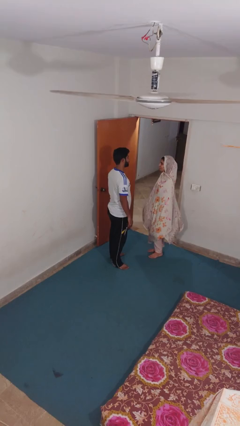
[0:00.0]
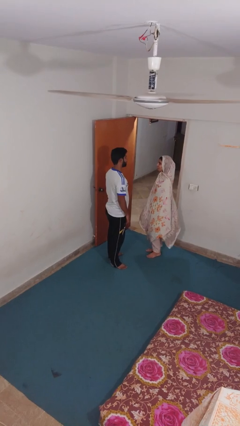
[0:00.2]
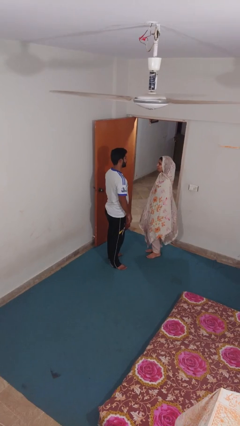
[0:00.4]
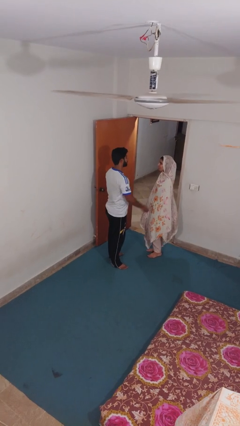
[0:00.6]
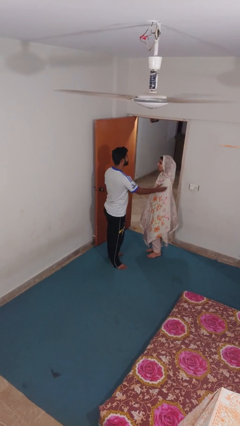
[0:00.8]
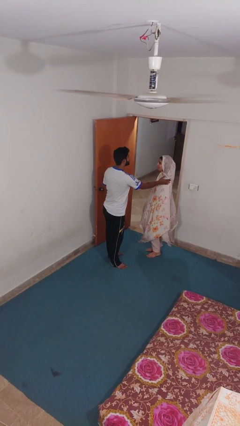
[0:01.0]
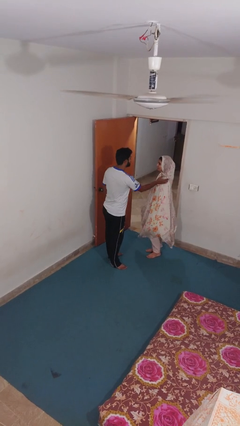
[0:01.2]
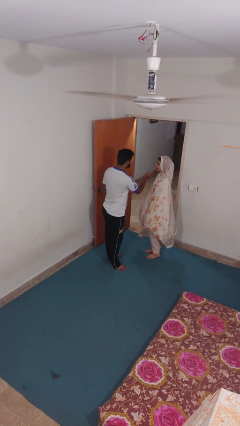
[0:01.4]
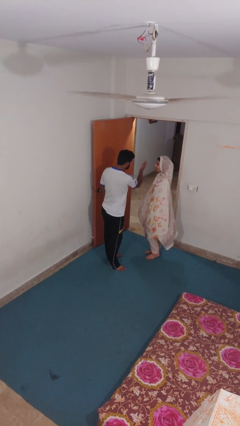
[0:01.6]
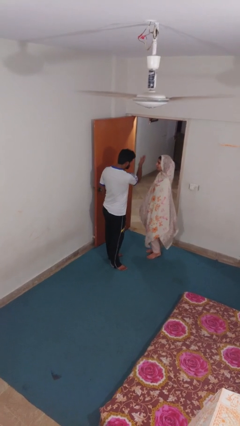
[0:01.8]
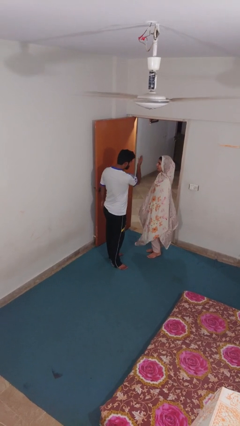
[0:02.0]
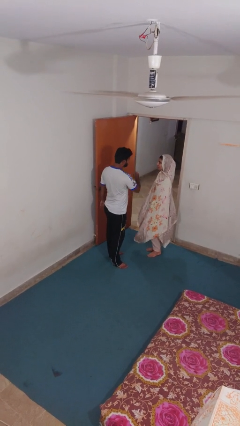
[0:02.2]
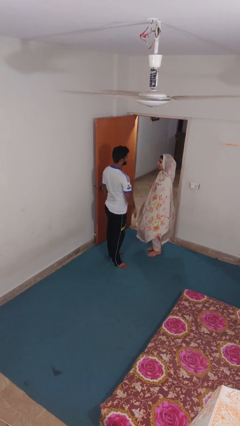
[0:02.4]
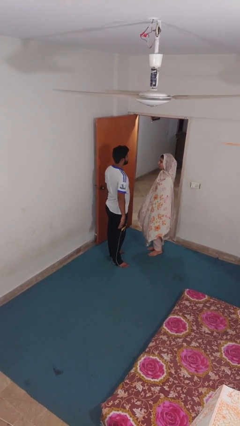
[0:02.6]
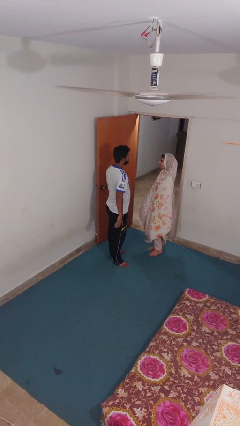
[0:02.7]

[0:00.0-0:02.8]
person shoves person

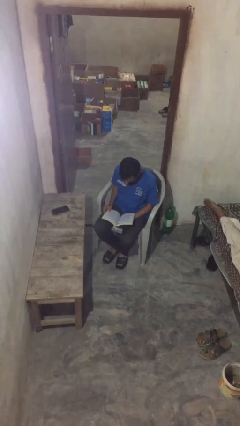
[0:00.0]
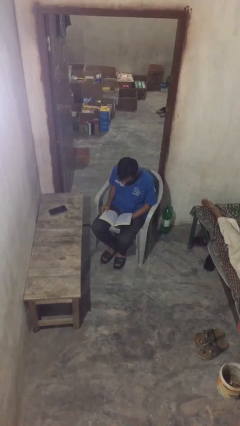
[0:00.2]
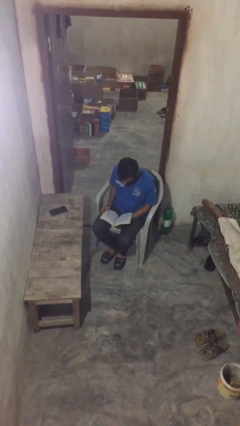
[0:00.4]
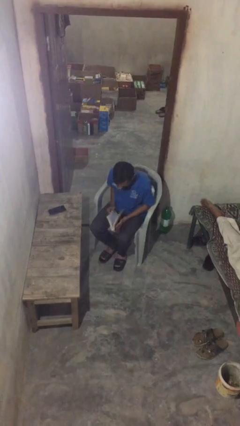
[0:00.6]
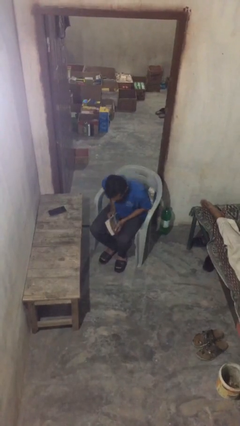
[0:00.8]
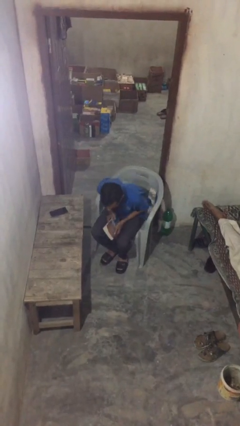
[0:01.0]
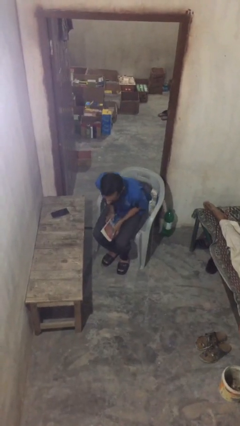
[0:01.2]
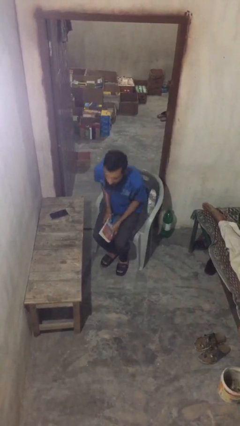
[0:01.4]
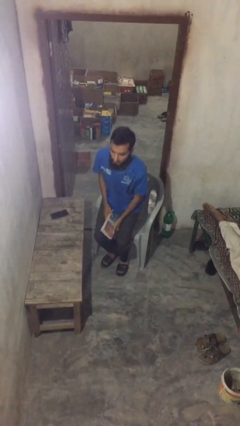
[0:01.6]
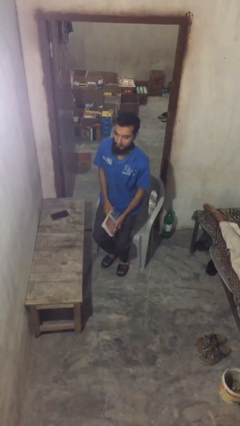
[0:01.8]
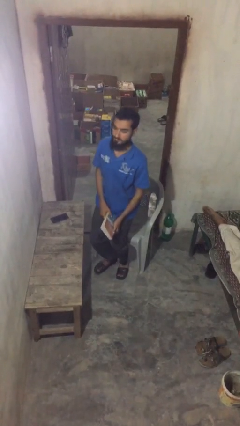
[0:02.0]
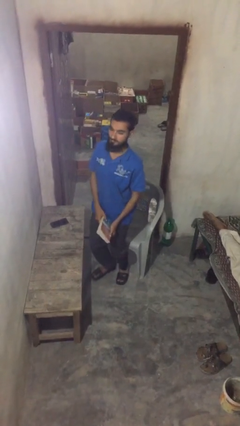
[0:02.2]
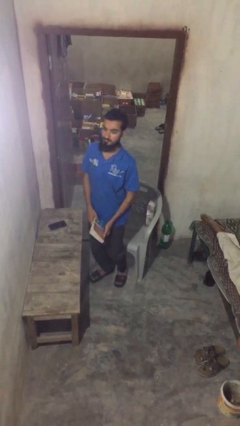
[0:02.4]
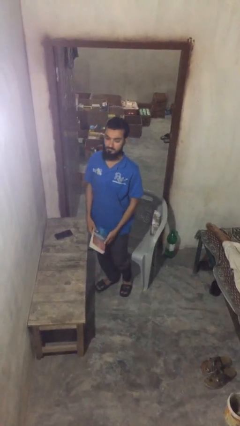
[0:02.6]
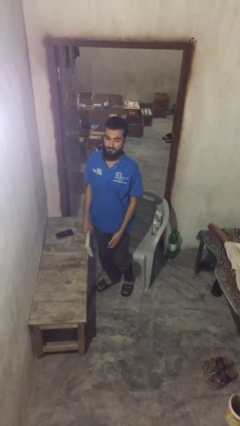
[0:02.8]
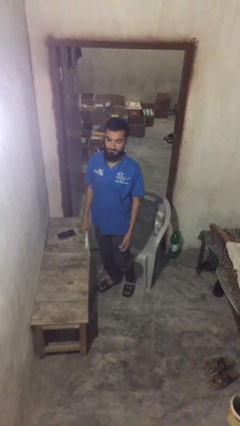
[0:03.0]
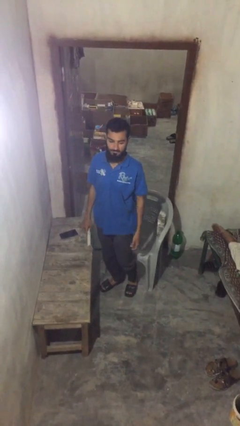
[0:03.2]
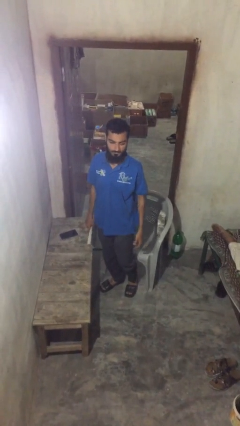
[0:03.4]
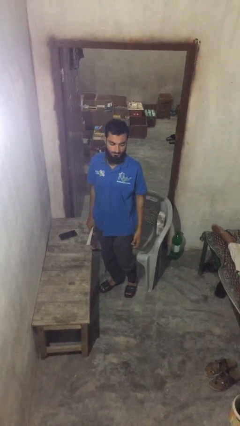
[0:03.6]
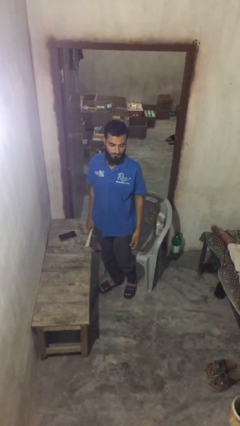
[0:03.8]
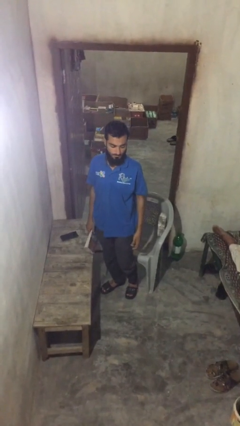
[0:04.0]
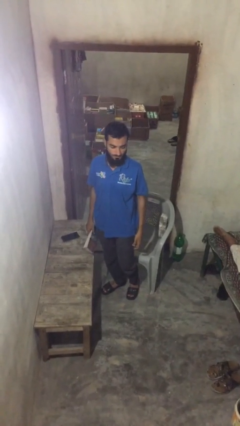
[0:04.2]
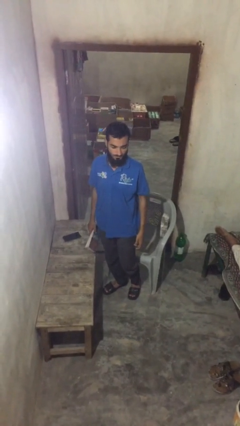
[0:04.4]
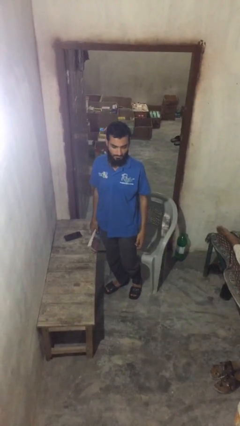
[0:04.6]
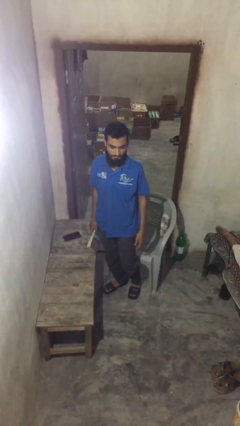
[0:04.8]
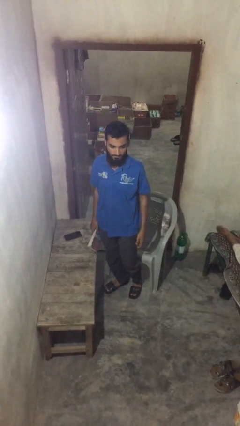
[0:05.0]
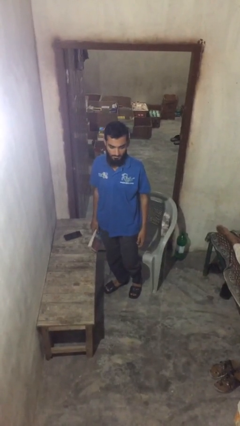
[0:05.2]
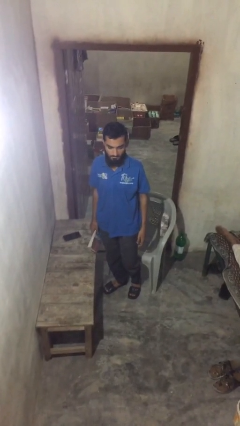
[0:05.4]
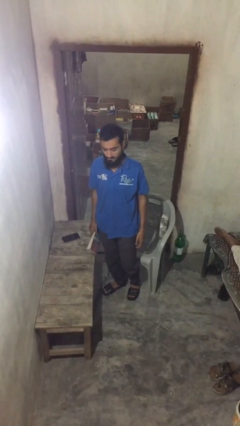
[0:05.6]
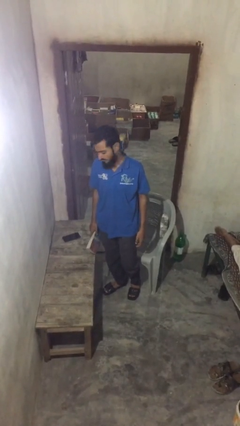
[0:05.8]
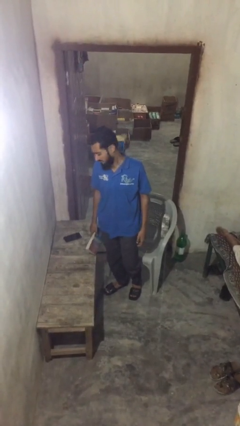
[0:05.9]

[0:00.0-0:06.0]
person stands up

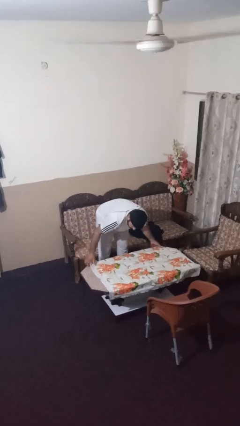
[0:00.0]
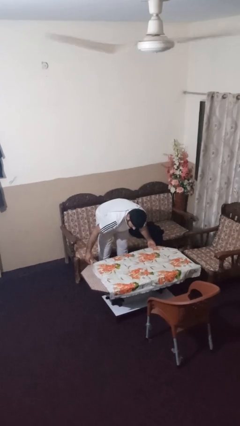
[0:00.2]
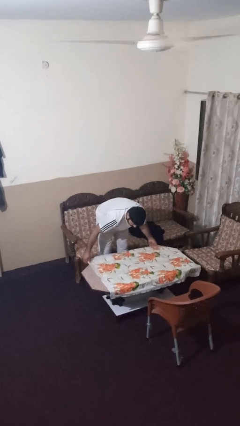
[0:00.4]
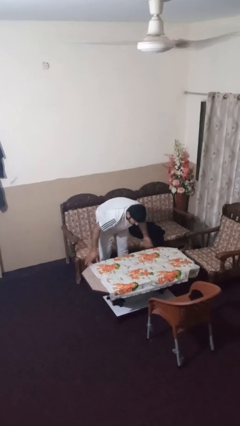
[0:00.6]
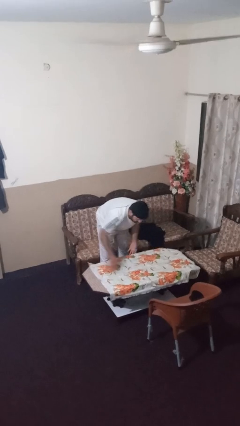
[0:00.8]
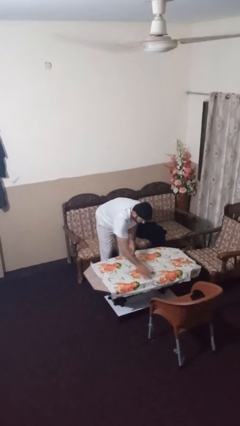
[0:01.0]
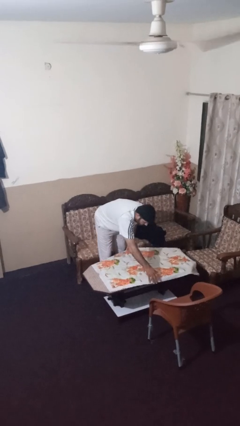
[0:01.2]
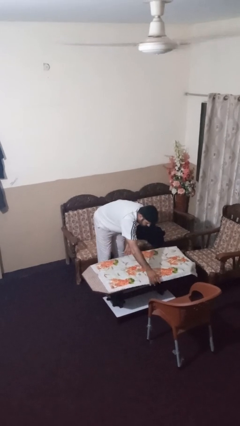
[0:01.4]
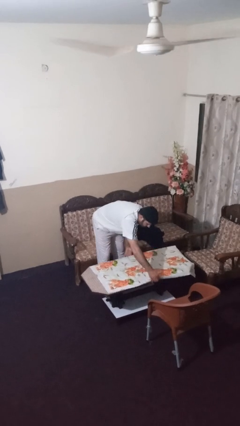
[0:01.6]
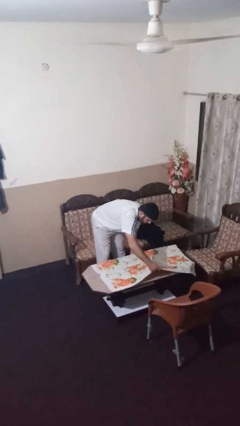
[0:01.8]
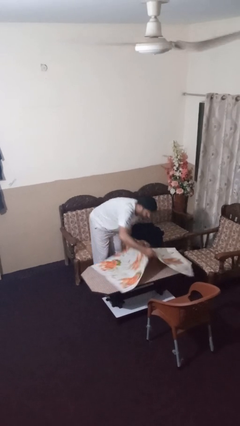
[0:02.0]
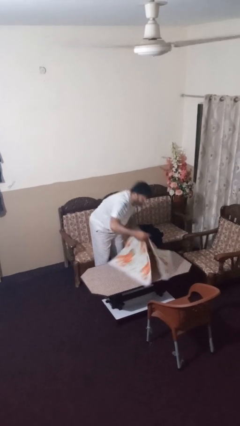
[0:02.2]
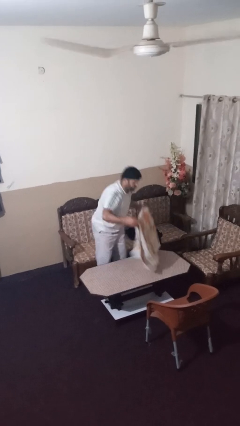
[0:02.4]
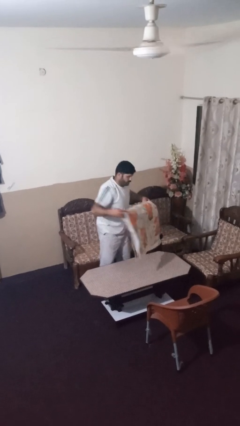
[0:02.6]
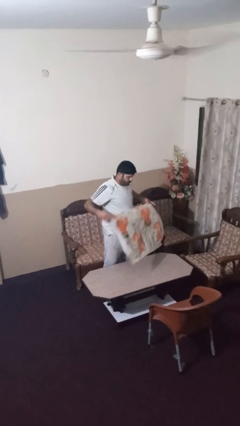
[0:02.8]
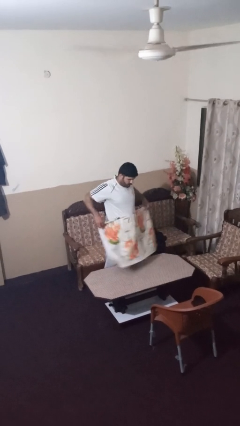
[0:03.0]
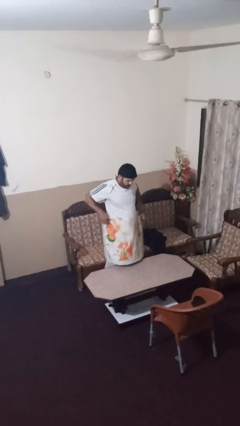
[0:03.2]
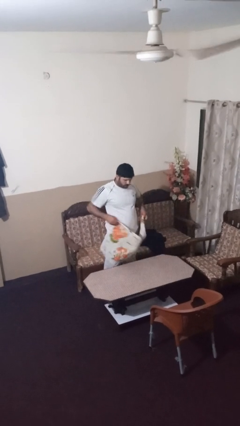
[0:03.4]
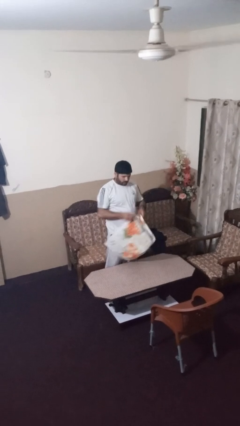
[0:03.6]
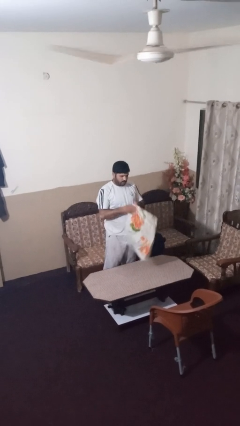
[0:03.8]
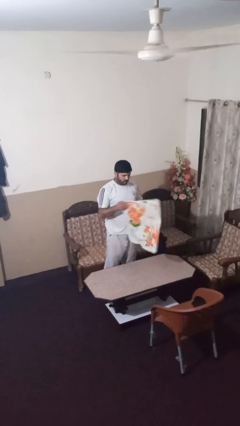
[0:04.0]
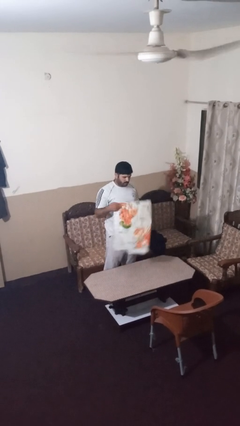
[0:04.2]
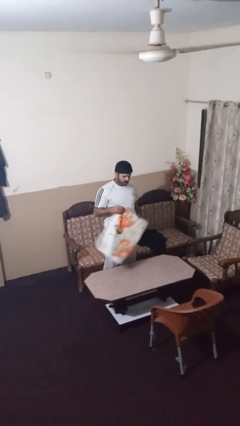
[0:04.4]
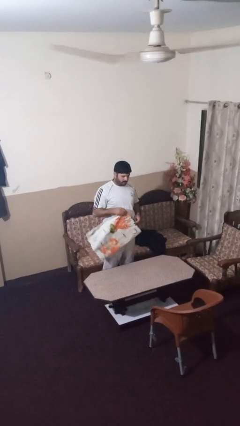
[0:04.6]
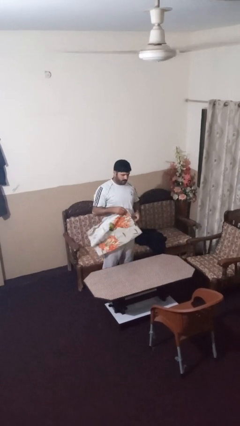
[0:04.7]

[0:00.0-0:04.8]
person folds tablecloth

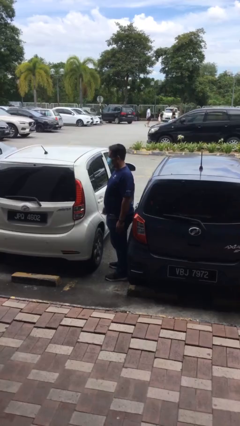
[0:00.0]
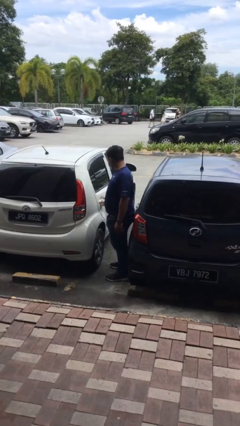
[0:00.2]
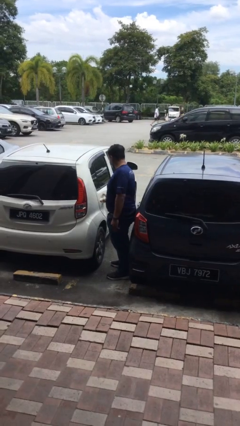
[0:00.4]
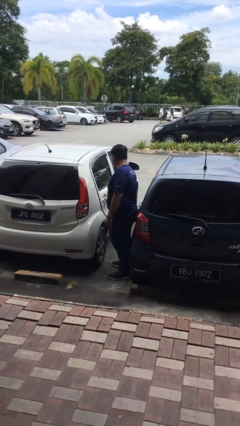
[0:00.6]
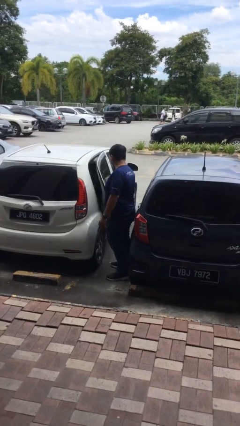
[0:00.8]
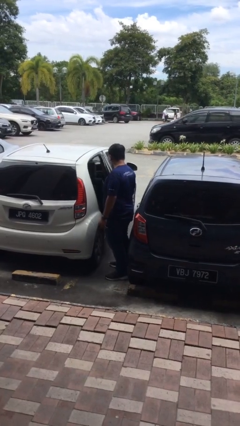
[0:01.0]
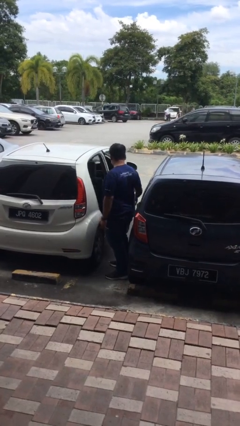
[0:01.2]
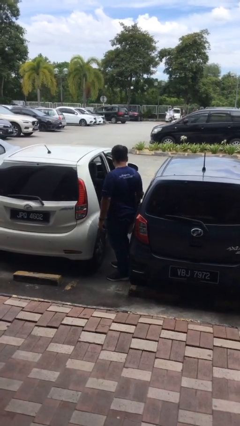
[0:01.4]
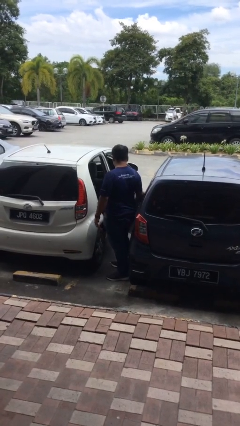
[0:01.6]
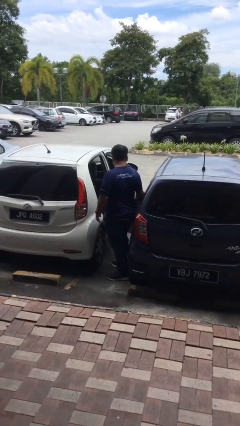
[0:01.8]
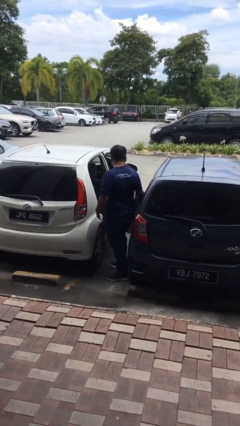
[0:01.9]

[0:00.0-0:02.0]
person opens car door

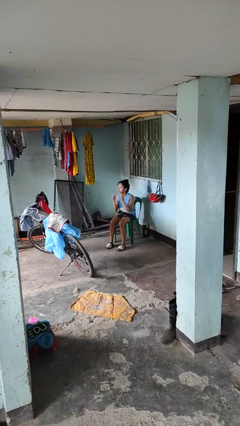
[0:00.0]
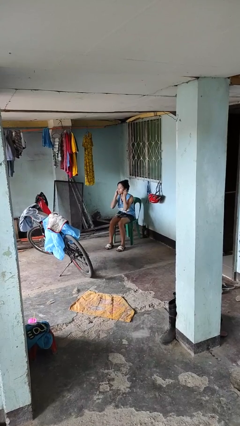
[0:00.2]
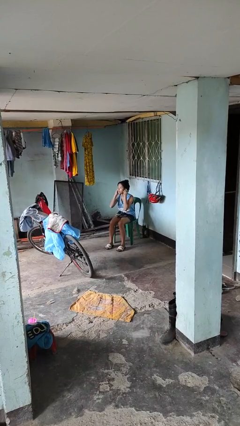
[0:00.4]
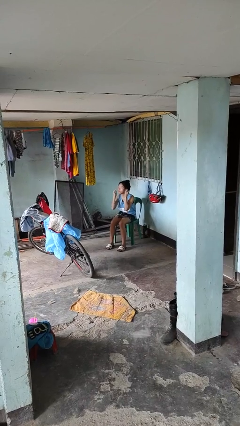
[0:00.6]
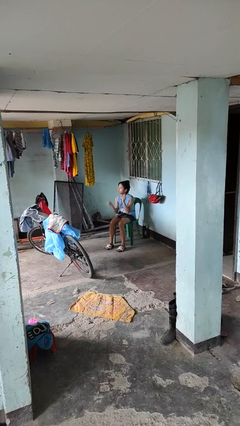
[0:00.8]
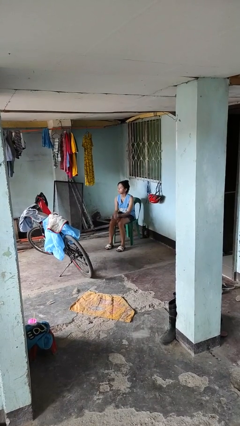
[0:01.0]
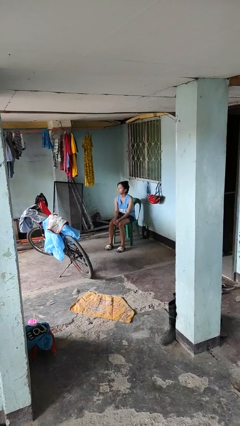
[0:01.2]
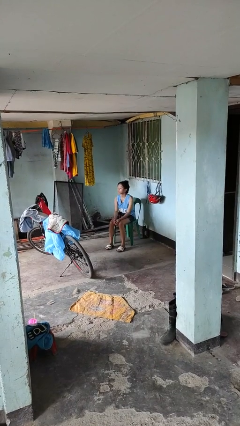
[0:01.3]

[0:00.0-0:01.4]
person takes off headphones

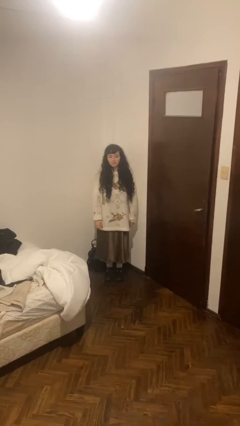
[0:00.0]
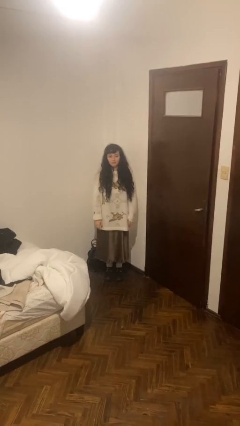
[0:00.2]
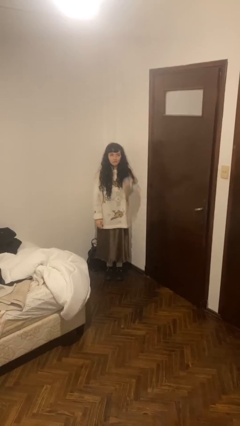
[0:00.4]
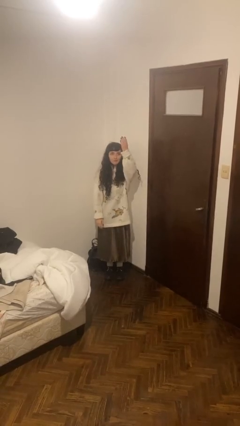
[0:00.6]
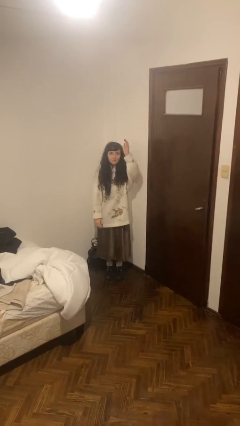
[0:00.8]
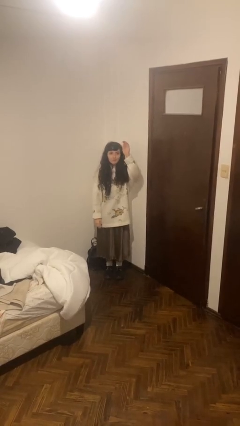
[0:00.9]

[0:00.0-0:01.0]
person gestures swipe up
